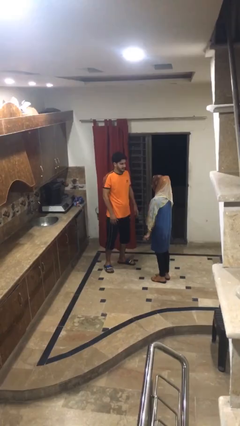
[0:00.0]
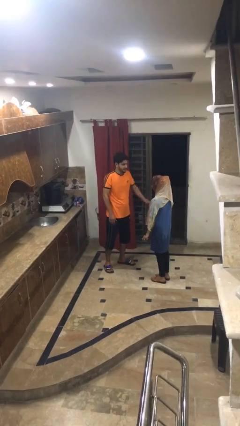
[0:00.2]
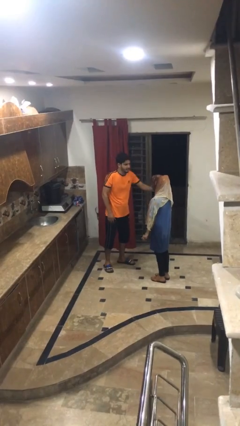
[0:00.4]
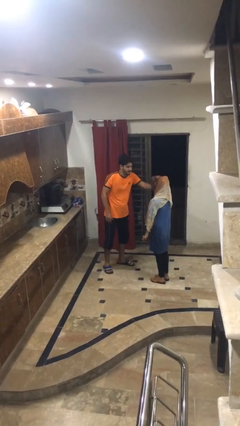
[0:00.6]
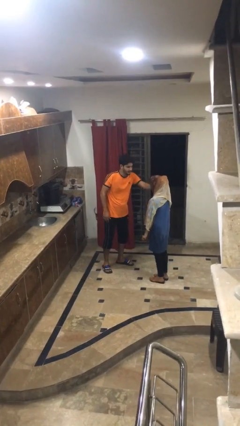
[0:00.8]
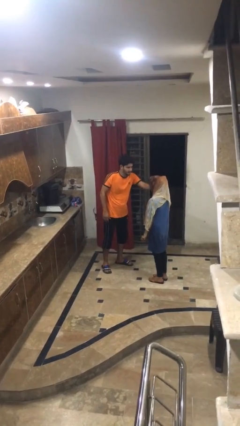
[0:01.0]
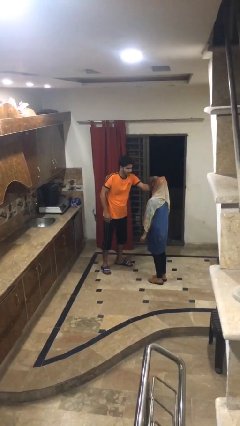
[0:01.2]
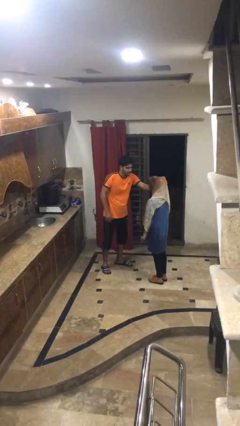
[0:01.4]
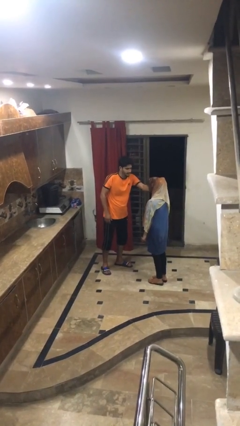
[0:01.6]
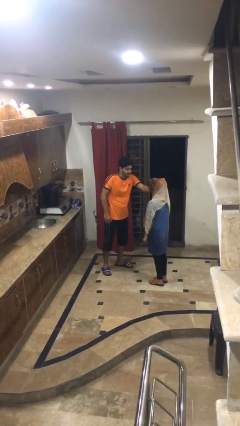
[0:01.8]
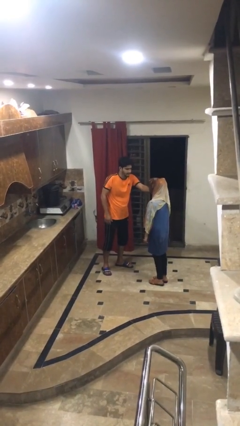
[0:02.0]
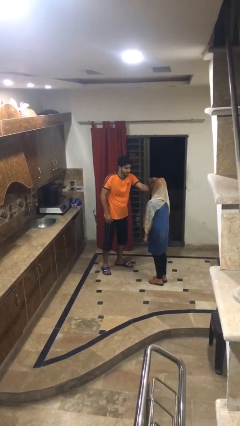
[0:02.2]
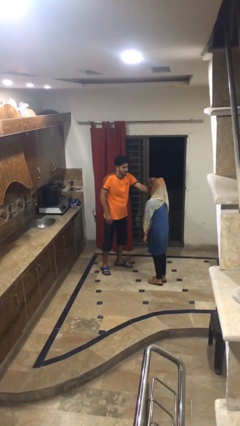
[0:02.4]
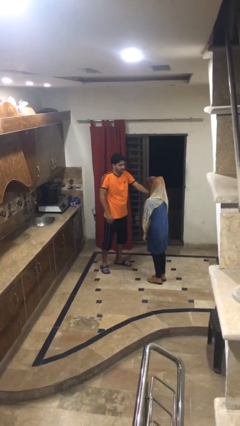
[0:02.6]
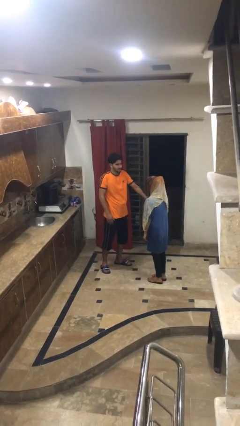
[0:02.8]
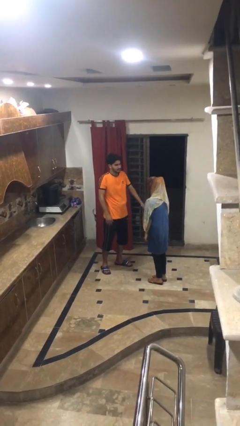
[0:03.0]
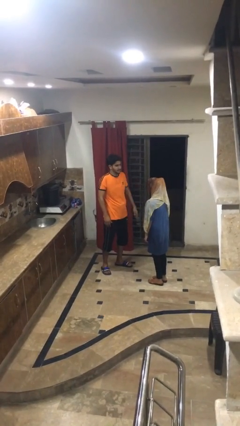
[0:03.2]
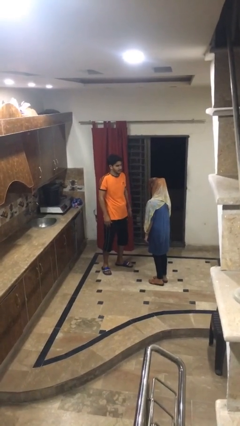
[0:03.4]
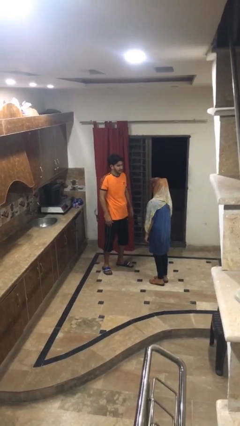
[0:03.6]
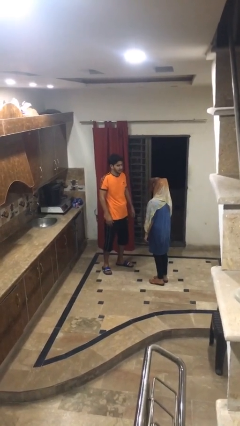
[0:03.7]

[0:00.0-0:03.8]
person touches face of person

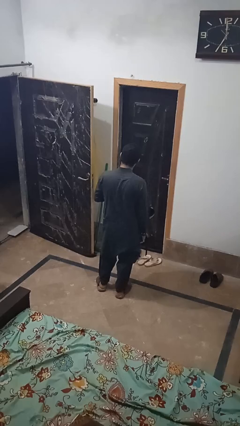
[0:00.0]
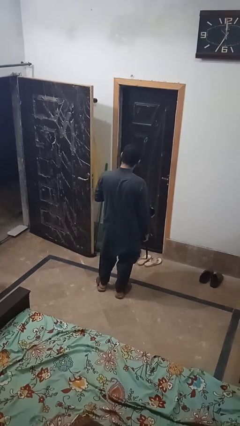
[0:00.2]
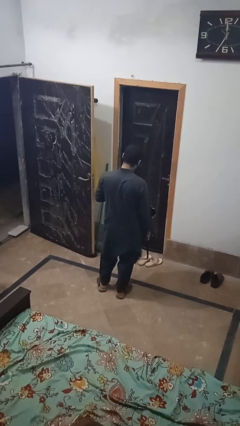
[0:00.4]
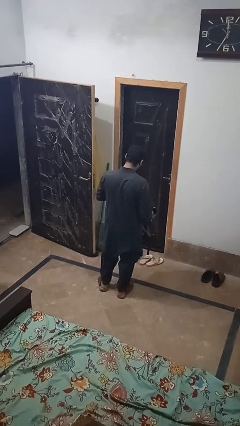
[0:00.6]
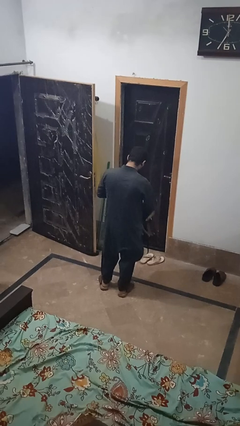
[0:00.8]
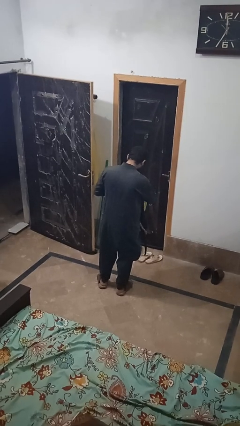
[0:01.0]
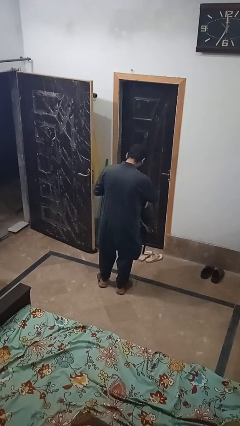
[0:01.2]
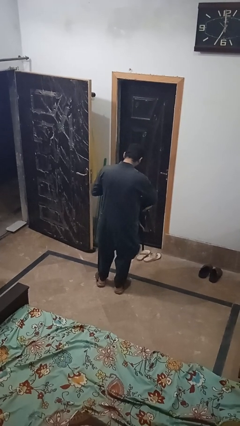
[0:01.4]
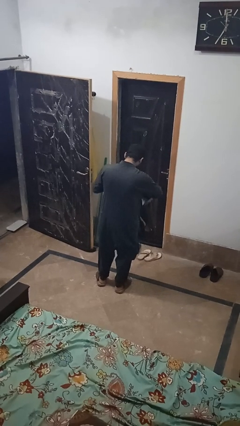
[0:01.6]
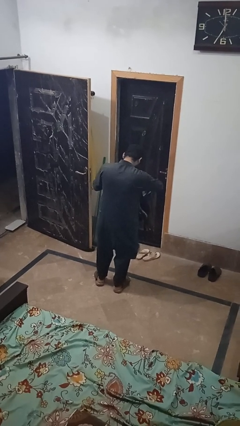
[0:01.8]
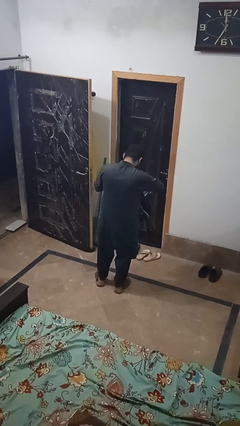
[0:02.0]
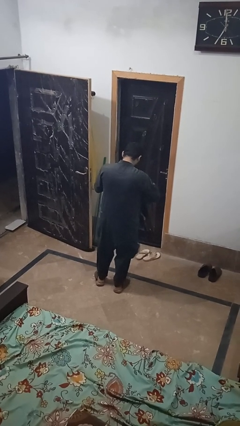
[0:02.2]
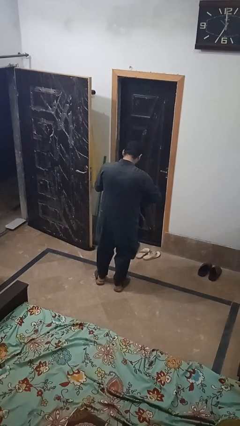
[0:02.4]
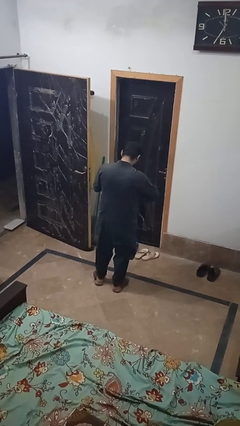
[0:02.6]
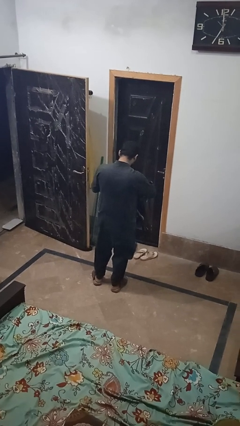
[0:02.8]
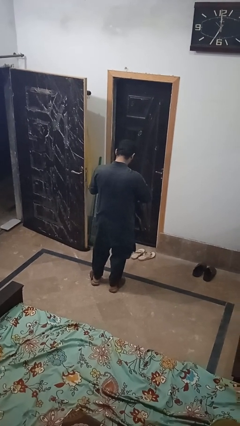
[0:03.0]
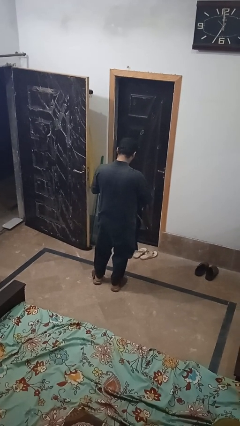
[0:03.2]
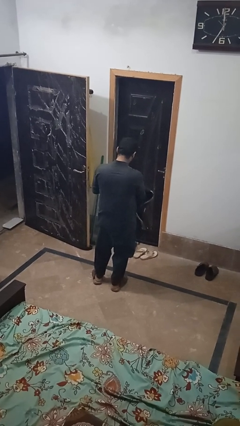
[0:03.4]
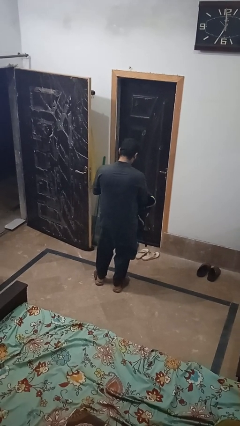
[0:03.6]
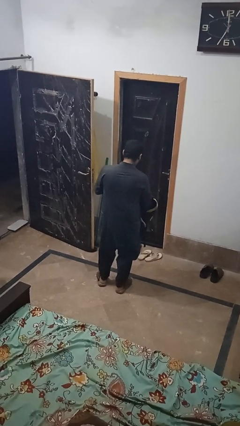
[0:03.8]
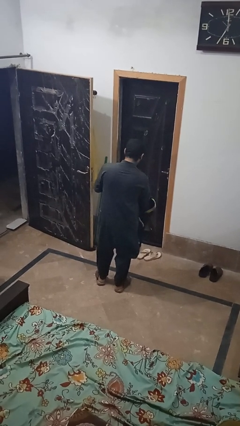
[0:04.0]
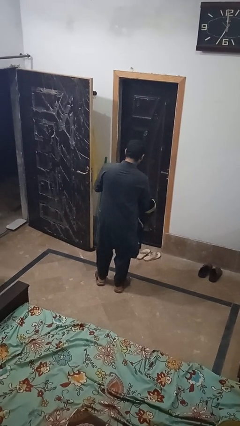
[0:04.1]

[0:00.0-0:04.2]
person searches in bag

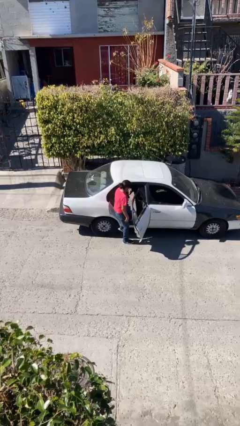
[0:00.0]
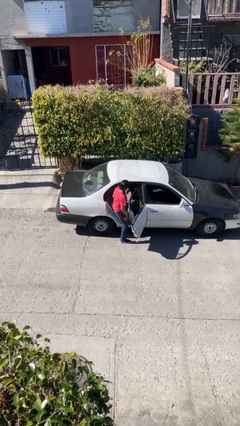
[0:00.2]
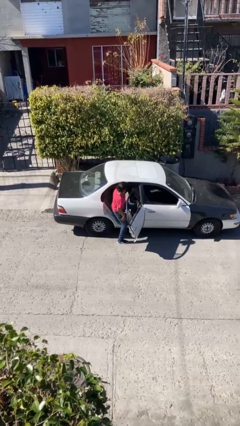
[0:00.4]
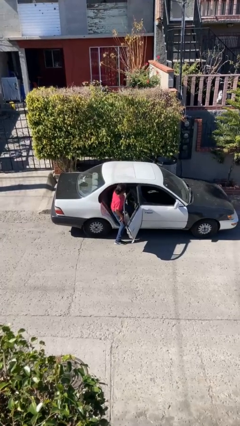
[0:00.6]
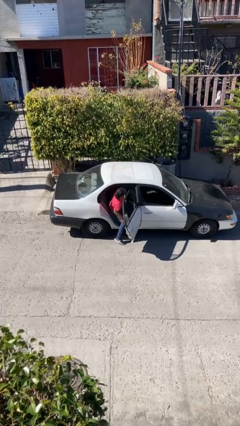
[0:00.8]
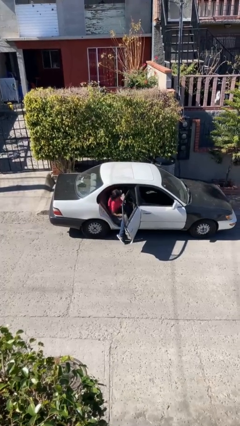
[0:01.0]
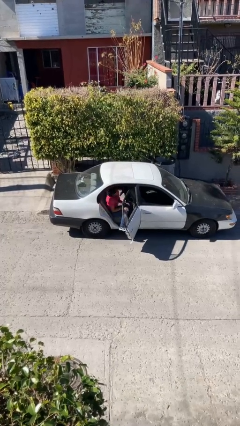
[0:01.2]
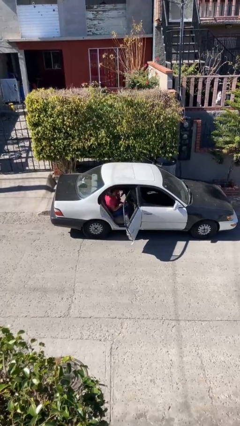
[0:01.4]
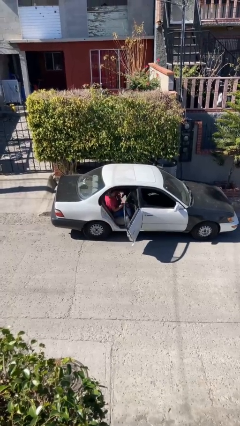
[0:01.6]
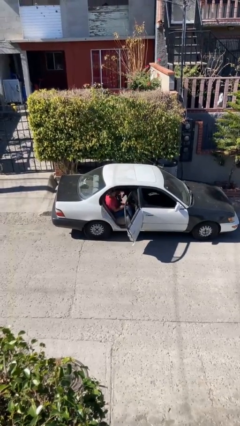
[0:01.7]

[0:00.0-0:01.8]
person enters car

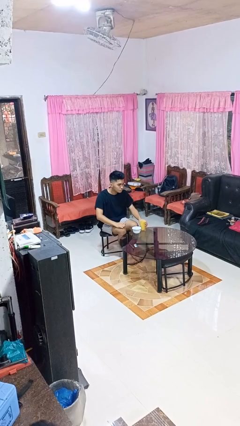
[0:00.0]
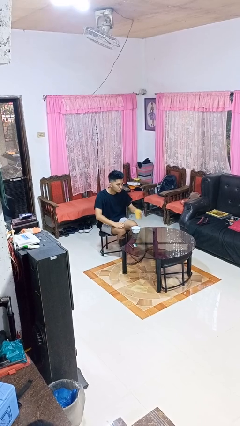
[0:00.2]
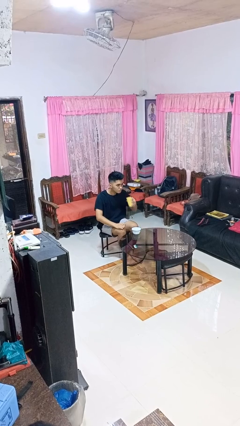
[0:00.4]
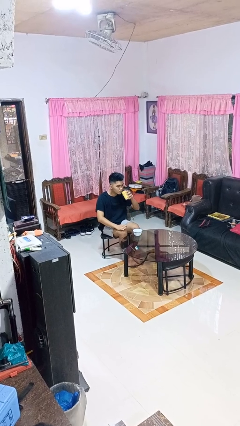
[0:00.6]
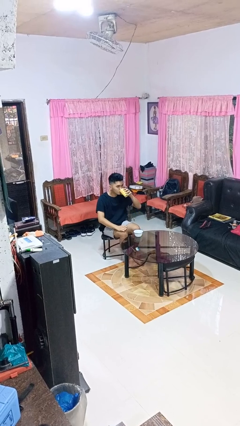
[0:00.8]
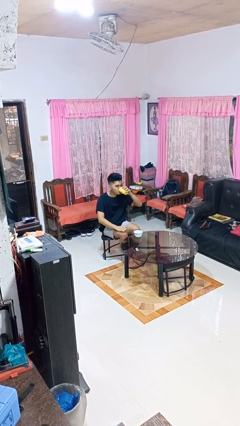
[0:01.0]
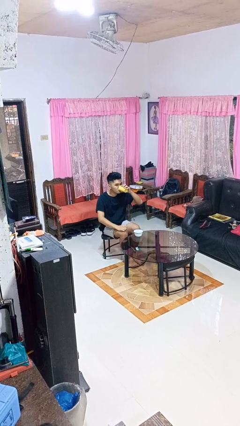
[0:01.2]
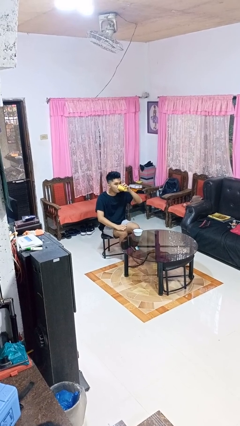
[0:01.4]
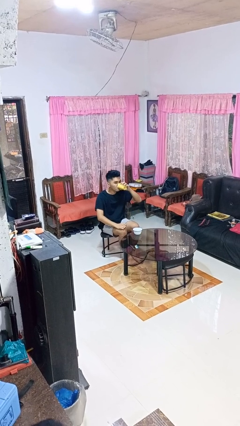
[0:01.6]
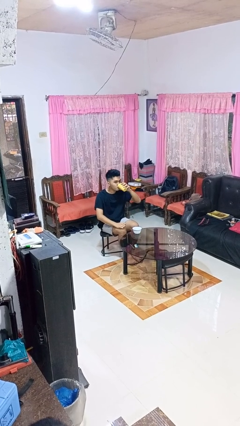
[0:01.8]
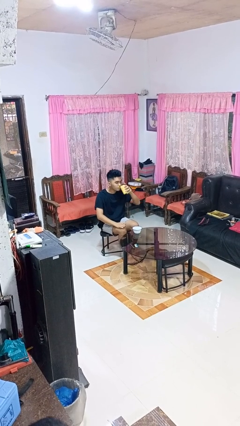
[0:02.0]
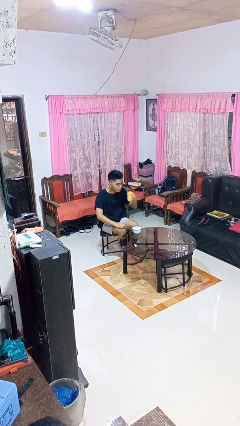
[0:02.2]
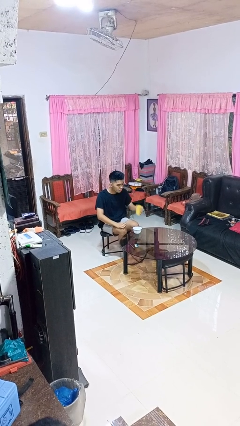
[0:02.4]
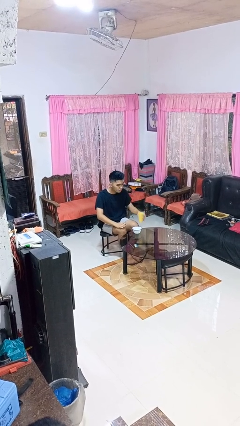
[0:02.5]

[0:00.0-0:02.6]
person drinks from cup

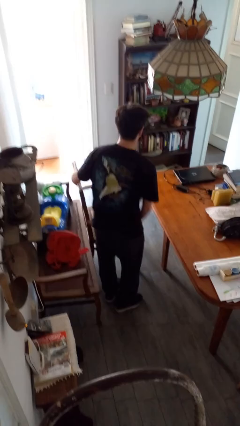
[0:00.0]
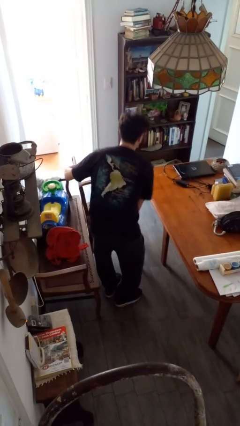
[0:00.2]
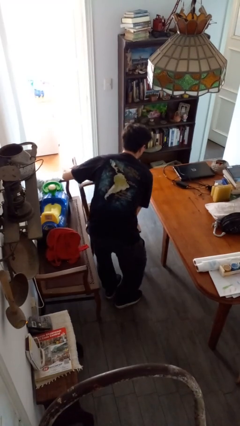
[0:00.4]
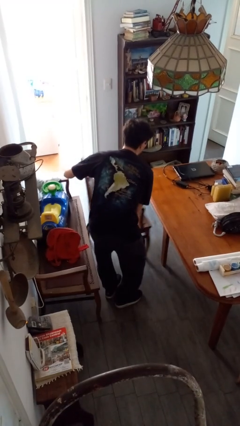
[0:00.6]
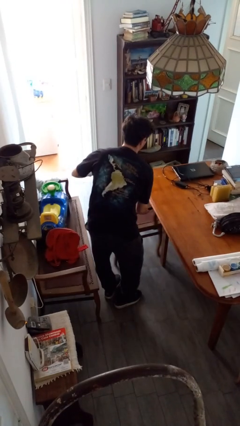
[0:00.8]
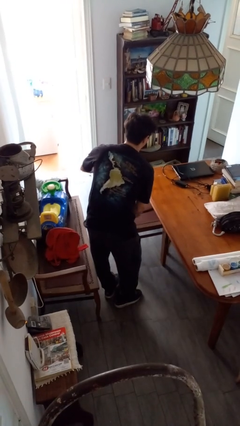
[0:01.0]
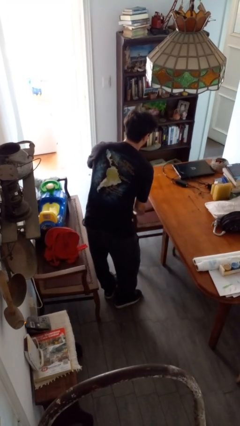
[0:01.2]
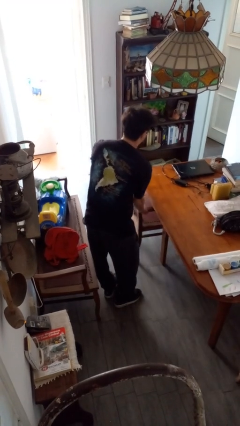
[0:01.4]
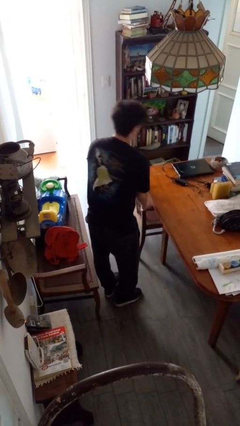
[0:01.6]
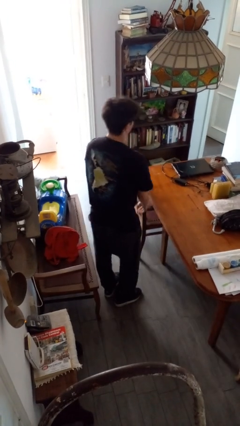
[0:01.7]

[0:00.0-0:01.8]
person pushes in chair

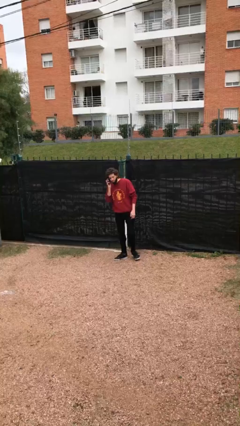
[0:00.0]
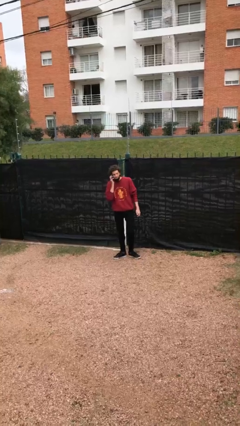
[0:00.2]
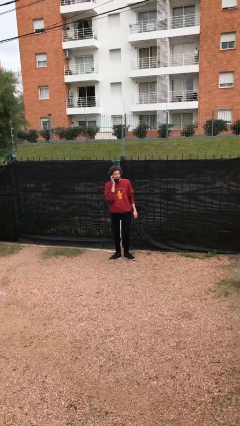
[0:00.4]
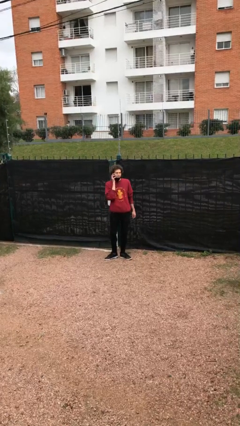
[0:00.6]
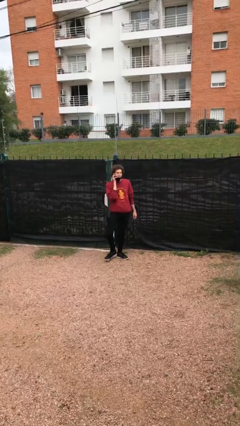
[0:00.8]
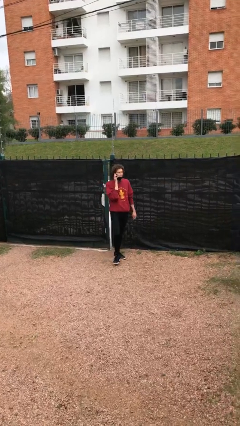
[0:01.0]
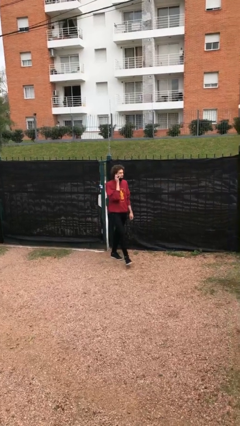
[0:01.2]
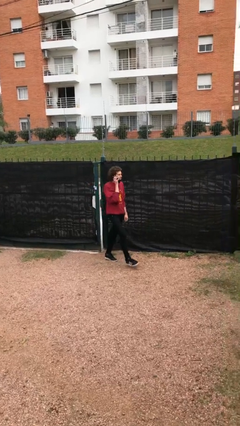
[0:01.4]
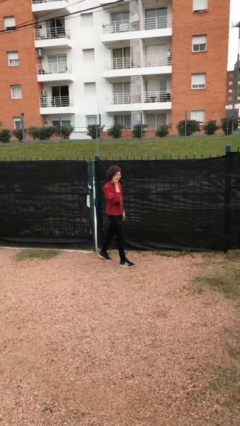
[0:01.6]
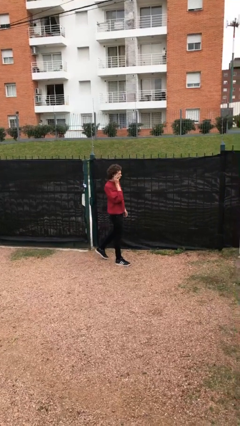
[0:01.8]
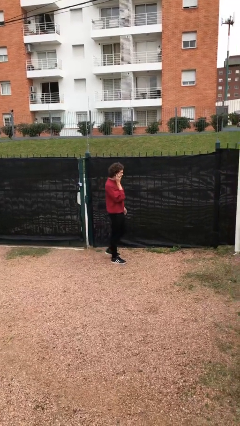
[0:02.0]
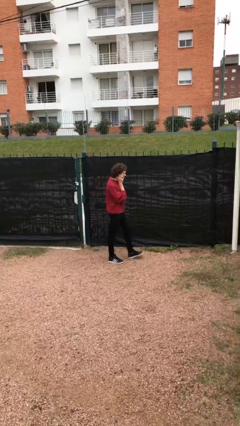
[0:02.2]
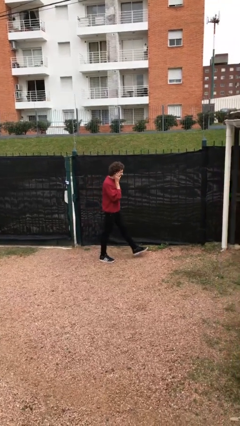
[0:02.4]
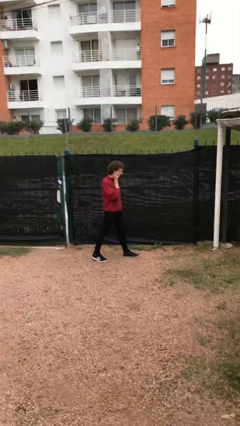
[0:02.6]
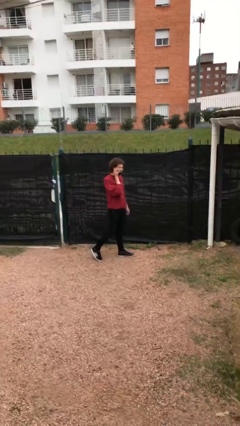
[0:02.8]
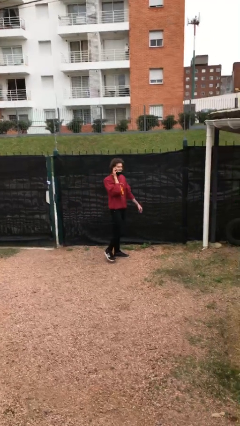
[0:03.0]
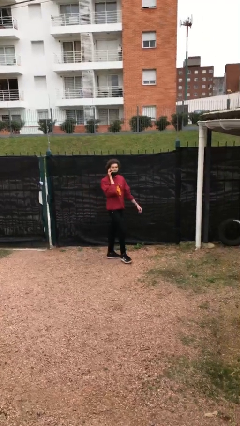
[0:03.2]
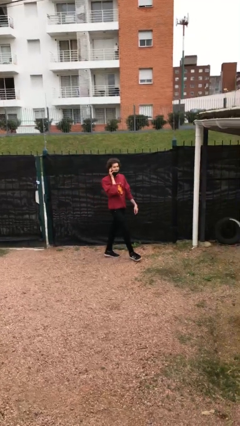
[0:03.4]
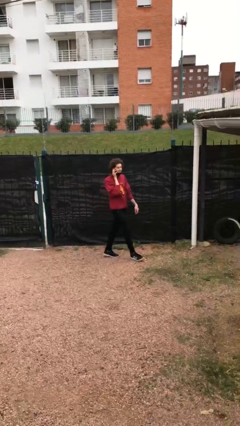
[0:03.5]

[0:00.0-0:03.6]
person talks on phone
